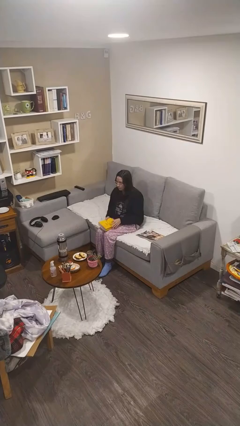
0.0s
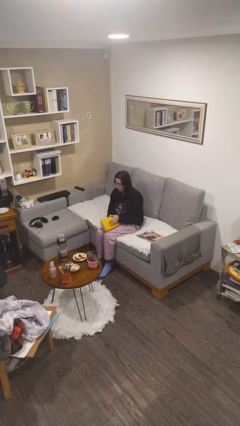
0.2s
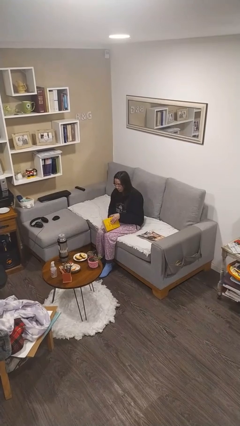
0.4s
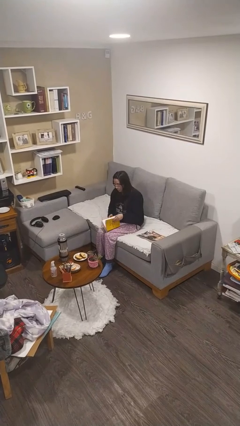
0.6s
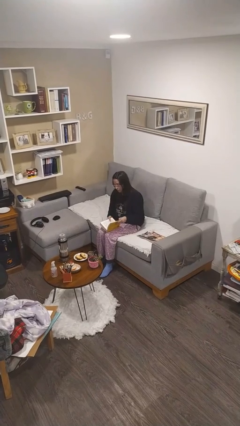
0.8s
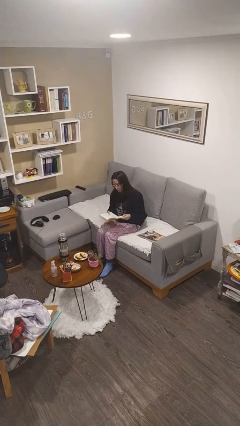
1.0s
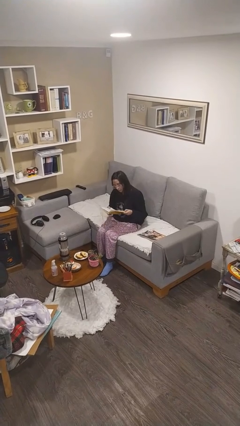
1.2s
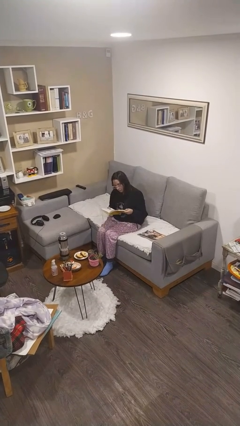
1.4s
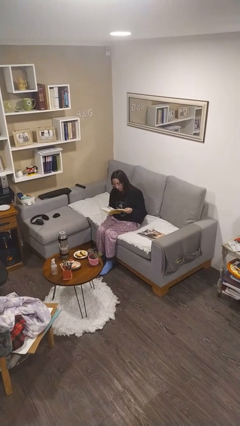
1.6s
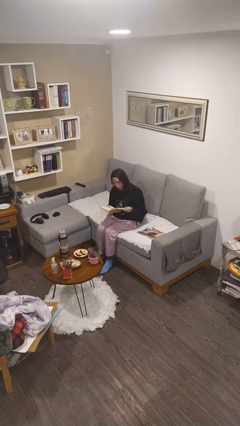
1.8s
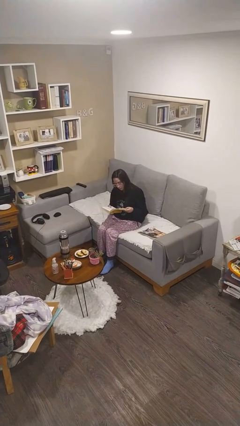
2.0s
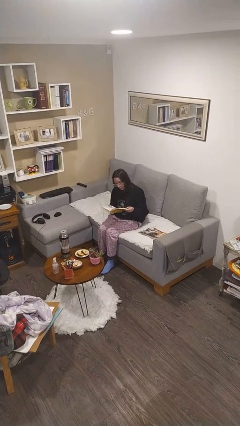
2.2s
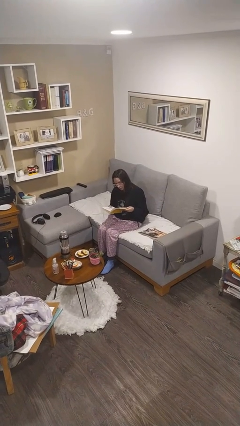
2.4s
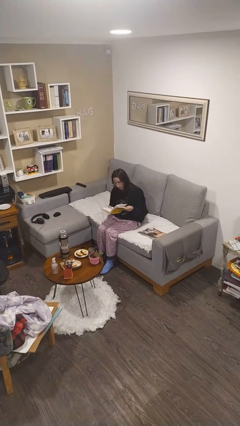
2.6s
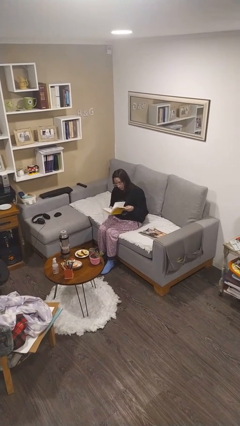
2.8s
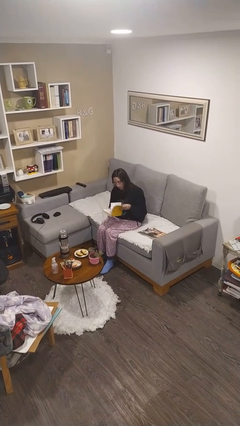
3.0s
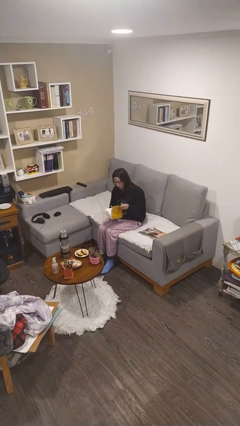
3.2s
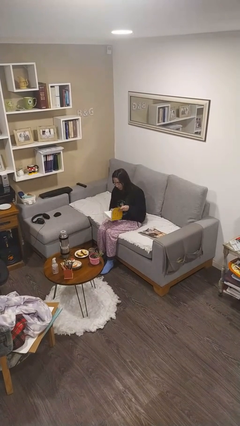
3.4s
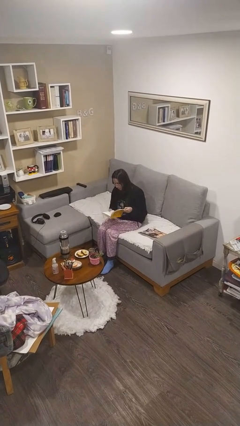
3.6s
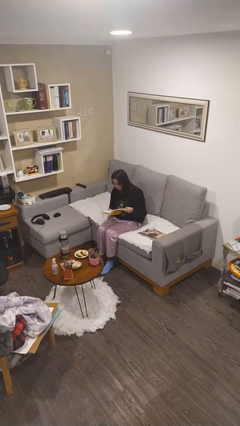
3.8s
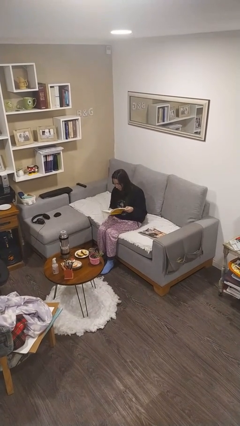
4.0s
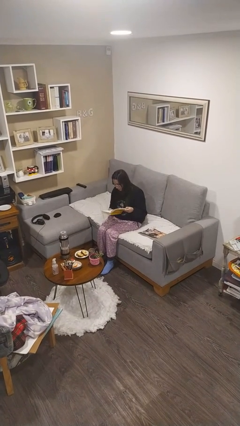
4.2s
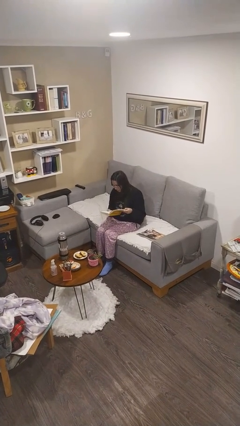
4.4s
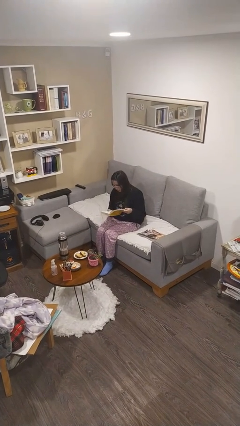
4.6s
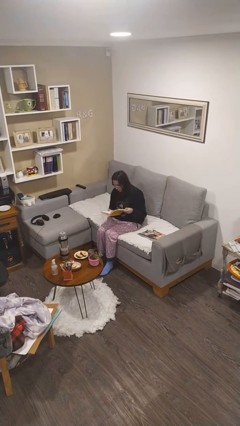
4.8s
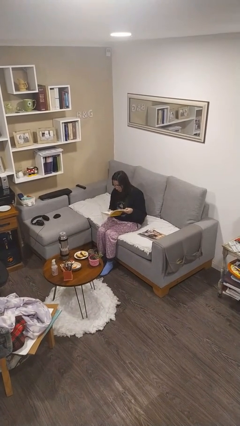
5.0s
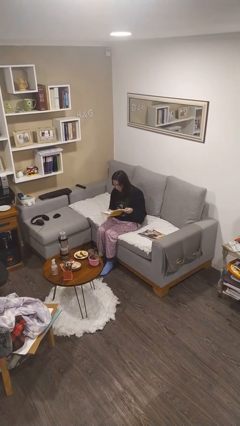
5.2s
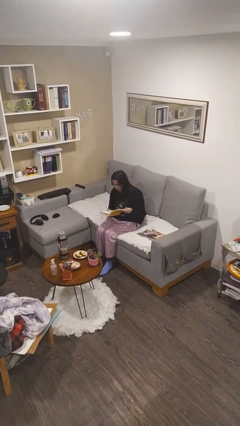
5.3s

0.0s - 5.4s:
person reads book

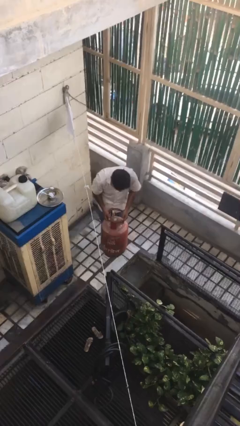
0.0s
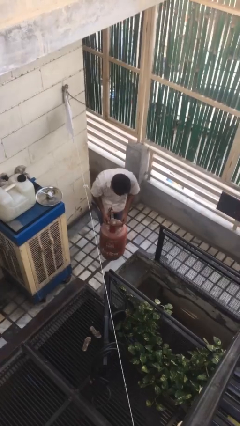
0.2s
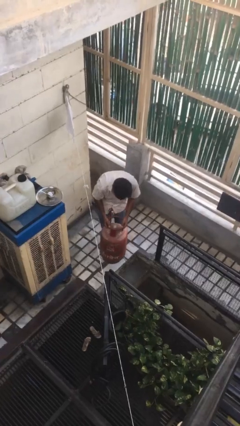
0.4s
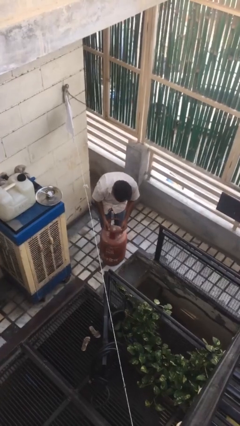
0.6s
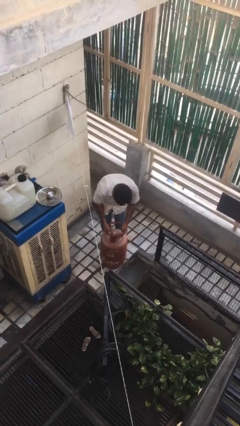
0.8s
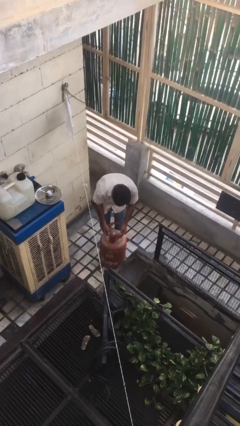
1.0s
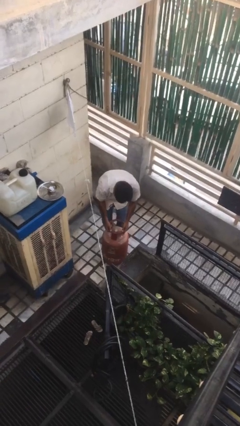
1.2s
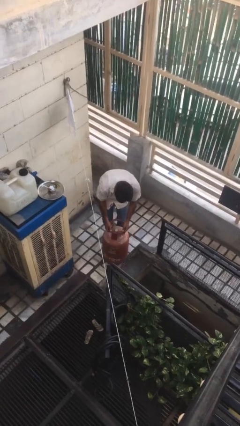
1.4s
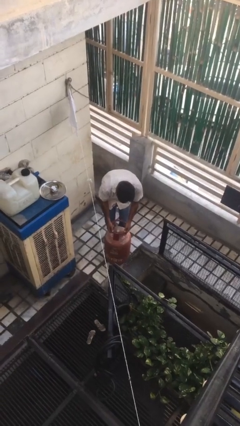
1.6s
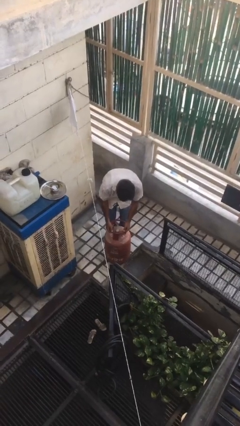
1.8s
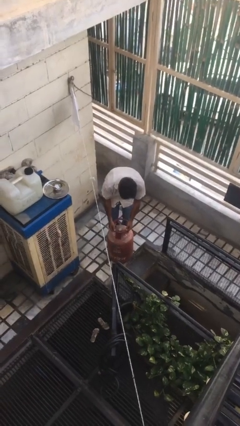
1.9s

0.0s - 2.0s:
person puts down object on floor

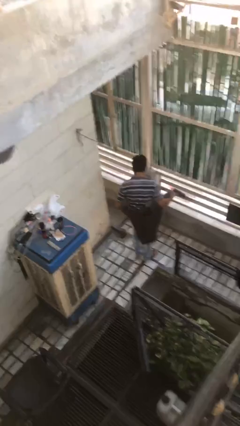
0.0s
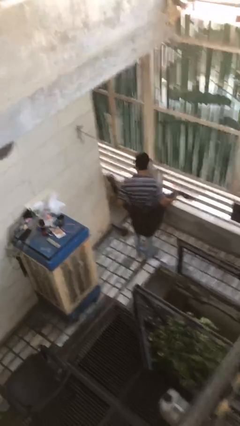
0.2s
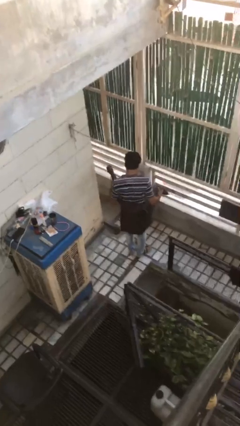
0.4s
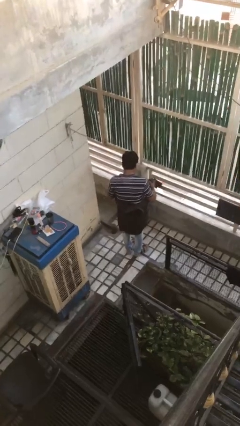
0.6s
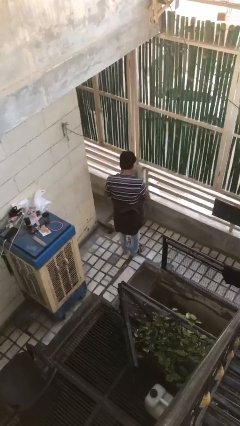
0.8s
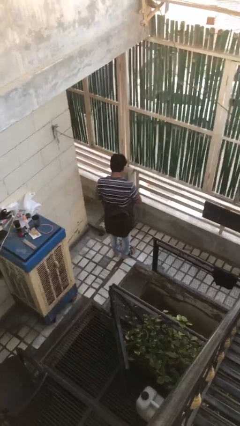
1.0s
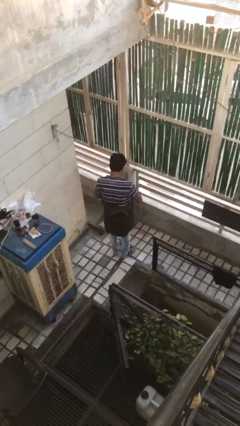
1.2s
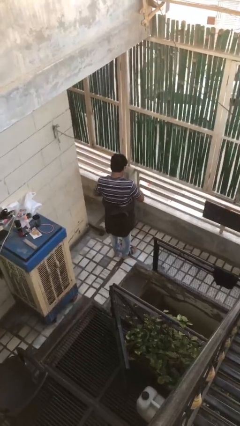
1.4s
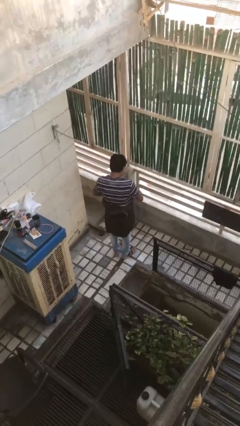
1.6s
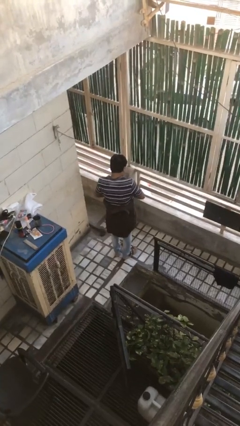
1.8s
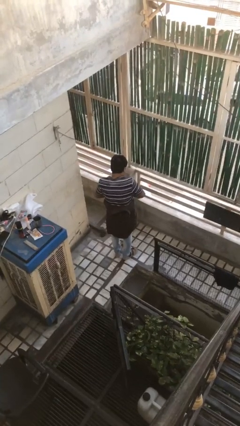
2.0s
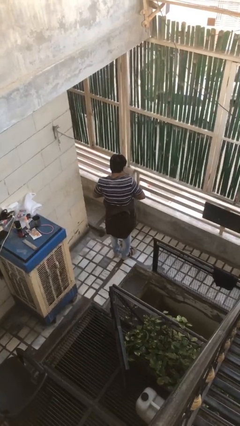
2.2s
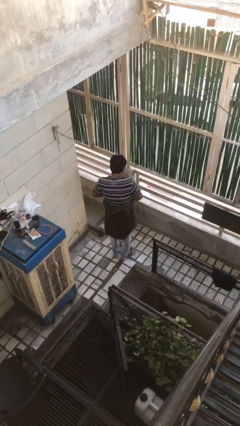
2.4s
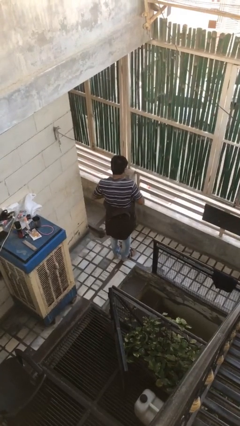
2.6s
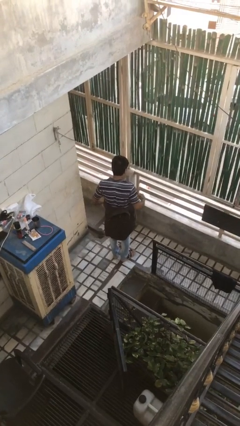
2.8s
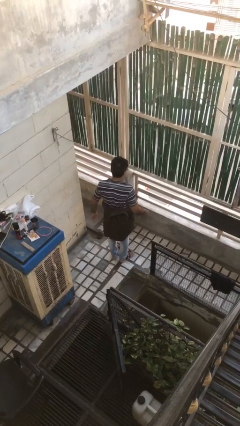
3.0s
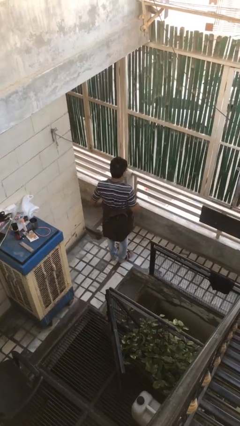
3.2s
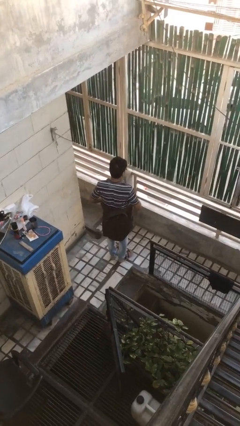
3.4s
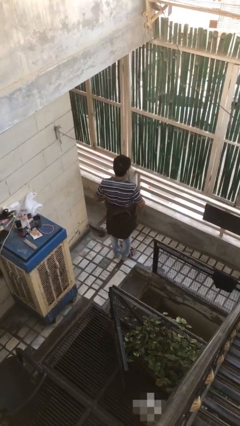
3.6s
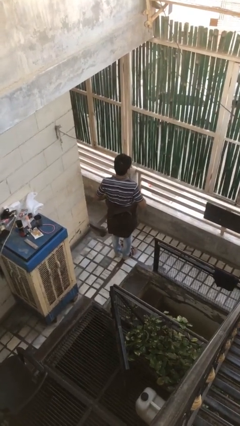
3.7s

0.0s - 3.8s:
person ties jacket around waist

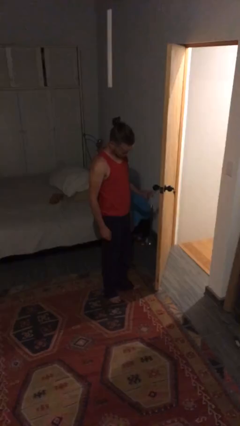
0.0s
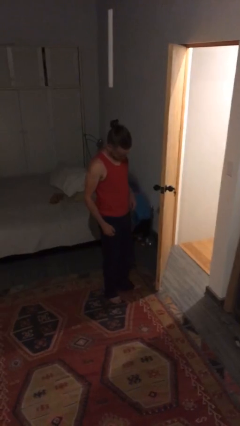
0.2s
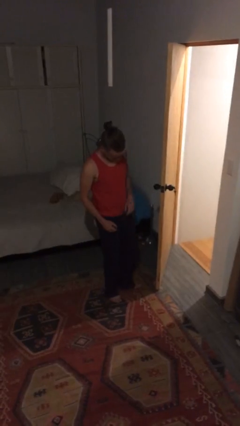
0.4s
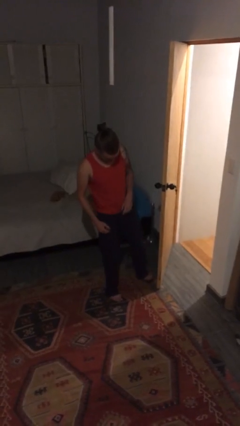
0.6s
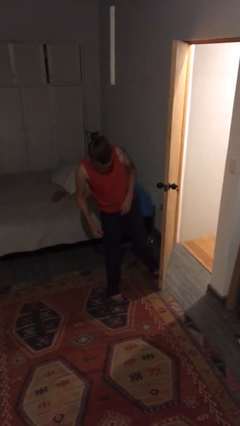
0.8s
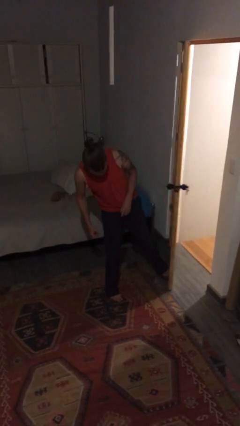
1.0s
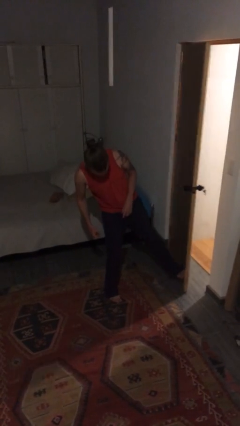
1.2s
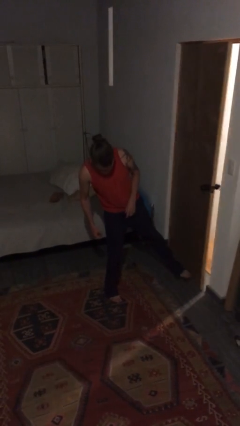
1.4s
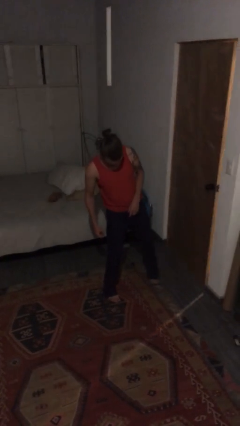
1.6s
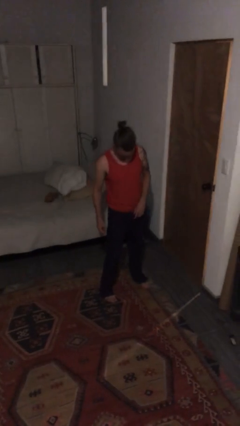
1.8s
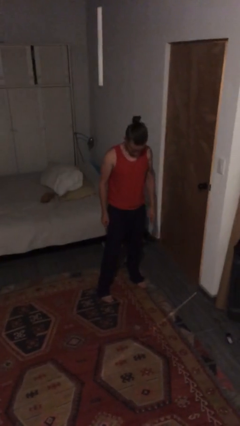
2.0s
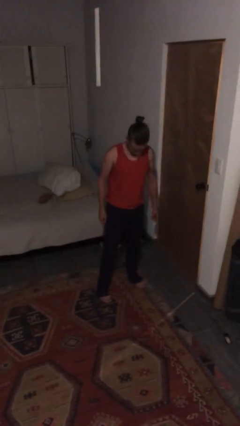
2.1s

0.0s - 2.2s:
person closes door with foot

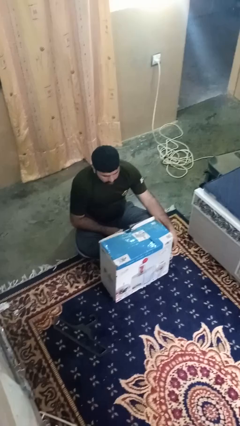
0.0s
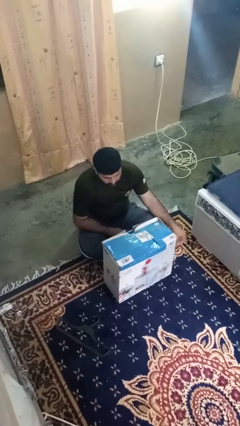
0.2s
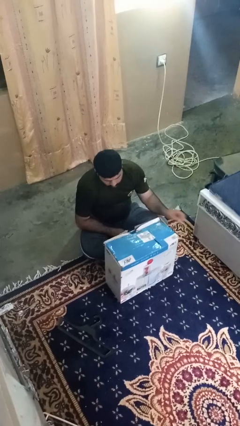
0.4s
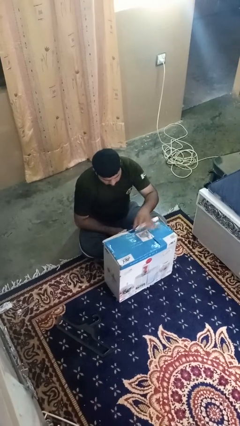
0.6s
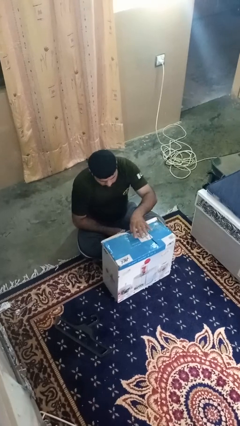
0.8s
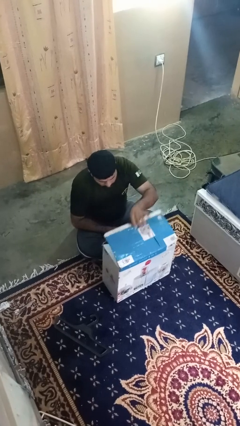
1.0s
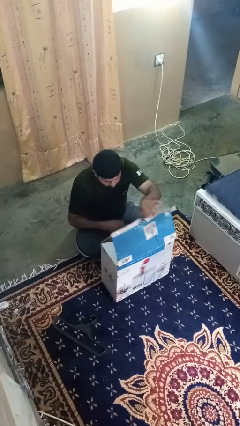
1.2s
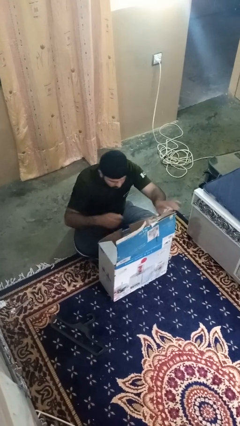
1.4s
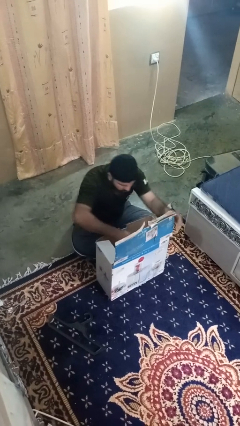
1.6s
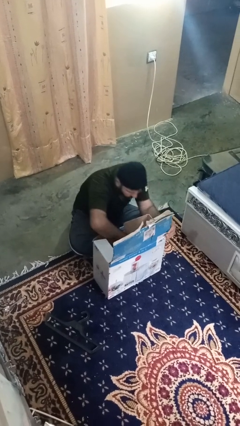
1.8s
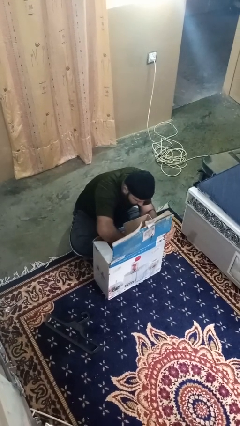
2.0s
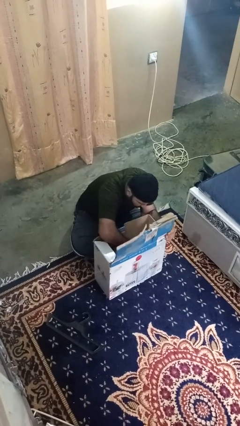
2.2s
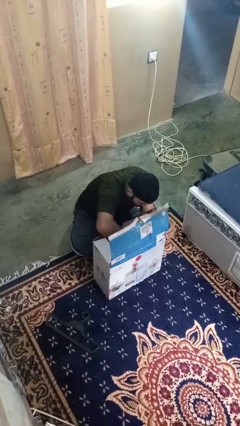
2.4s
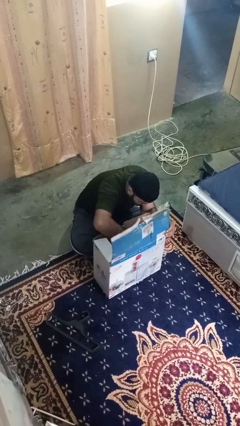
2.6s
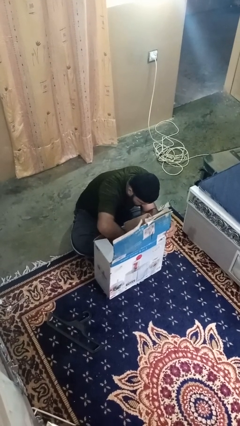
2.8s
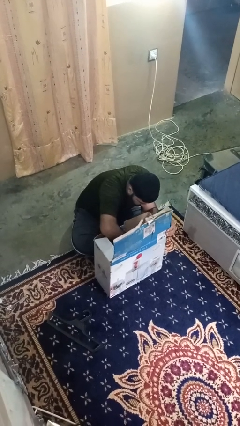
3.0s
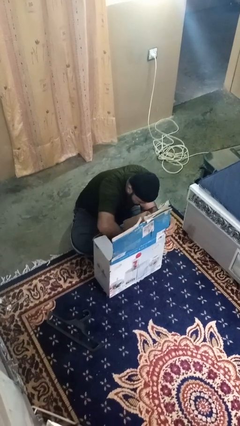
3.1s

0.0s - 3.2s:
person searches in box

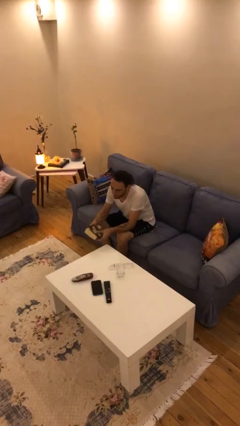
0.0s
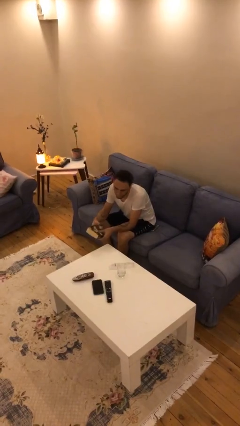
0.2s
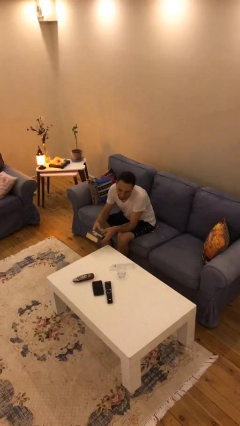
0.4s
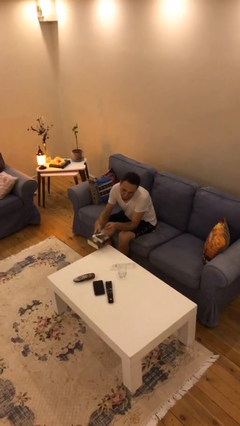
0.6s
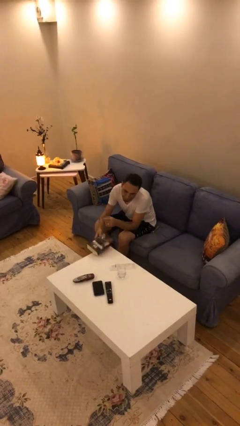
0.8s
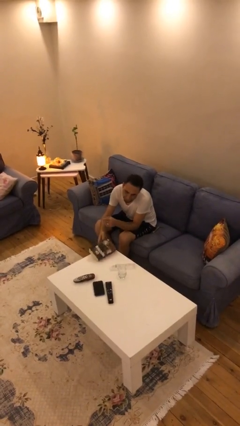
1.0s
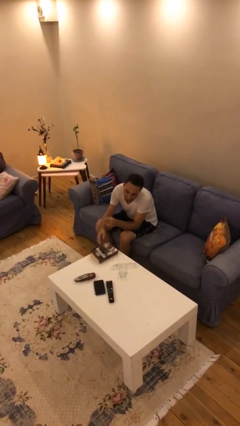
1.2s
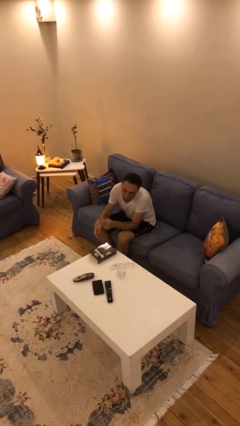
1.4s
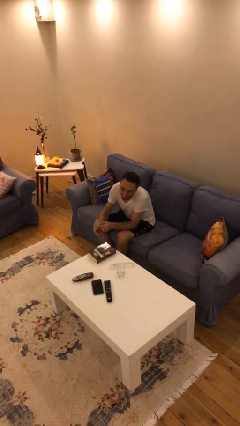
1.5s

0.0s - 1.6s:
person puts down object on table
